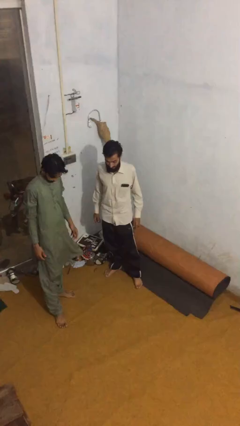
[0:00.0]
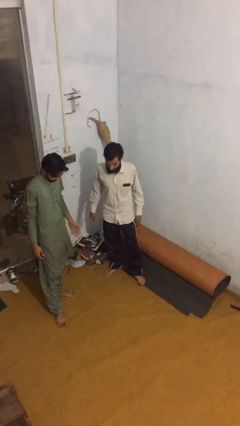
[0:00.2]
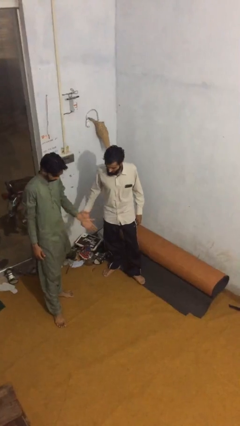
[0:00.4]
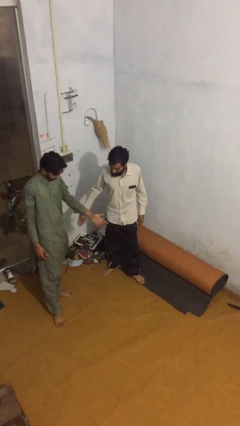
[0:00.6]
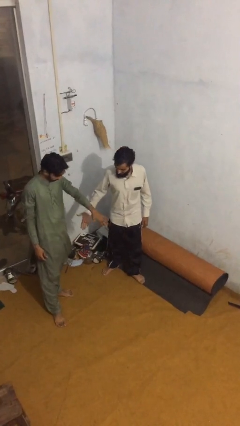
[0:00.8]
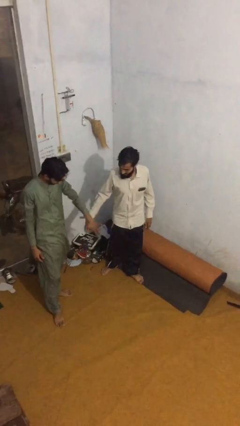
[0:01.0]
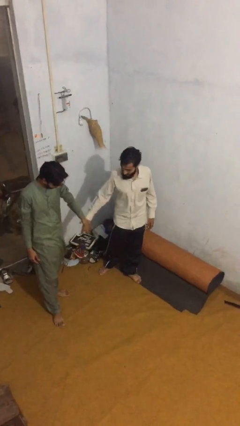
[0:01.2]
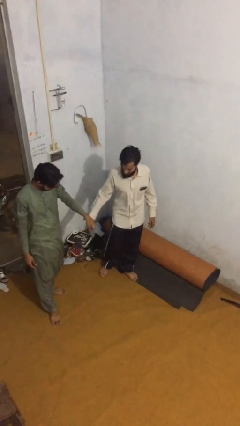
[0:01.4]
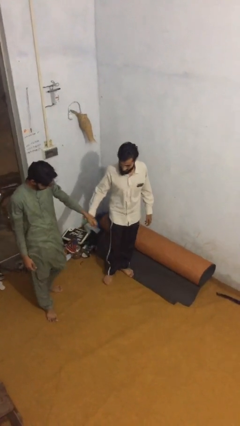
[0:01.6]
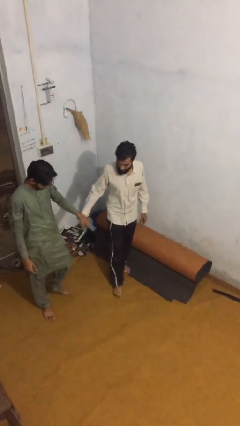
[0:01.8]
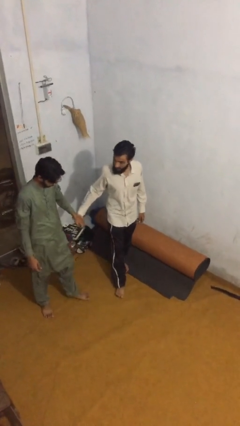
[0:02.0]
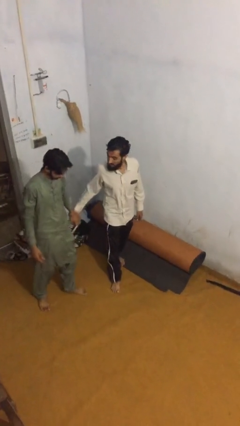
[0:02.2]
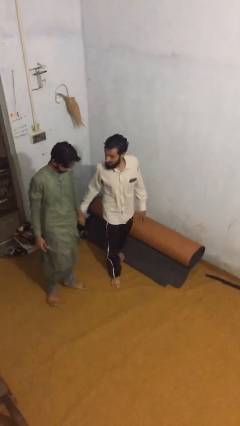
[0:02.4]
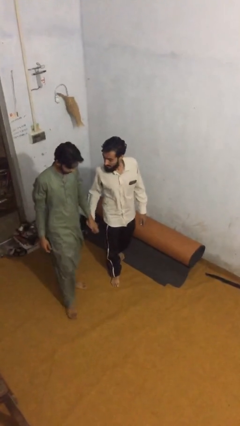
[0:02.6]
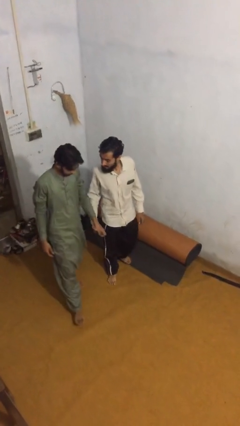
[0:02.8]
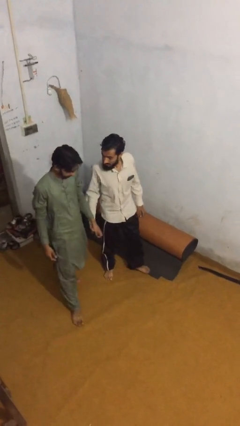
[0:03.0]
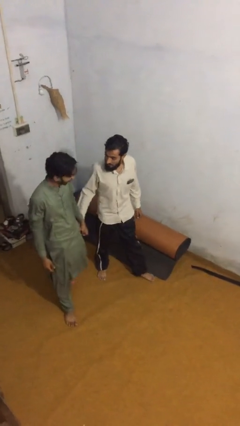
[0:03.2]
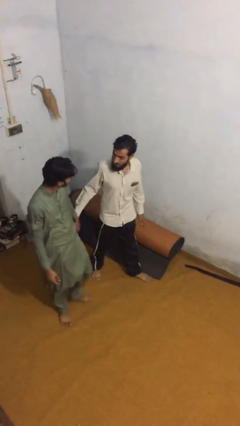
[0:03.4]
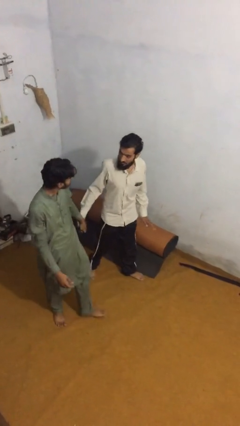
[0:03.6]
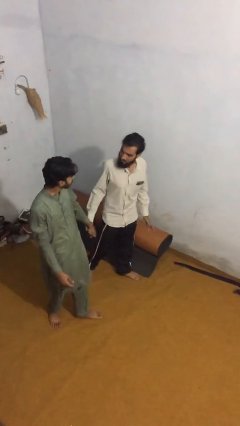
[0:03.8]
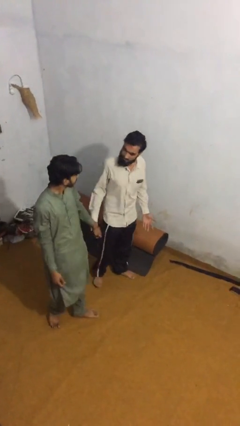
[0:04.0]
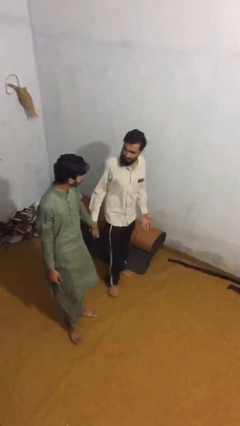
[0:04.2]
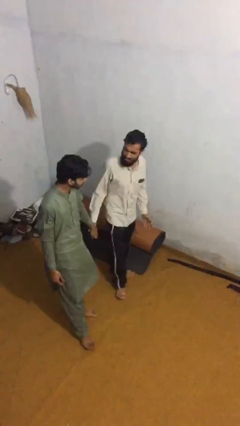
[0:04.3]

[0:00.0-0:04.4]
person holds hand

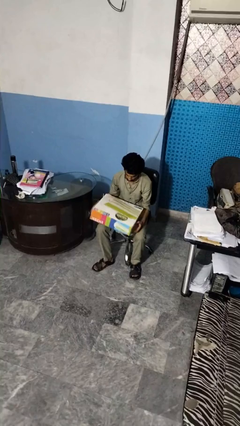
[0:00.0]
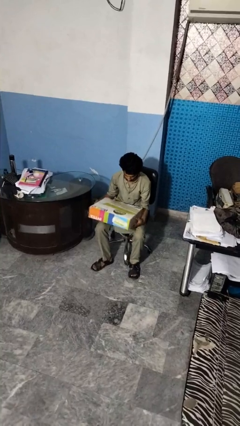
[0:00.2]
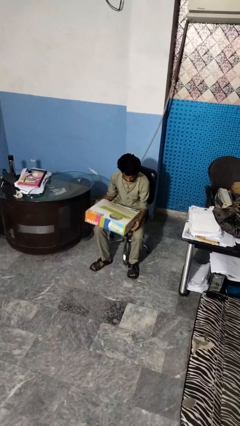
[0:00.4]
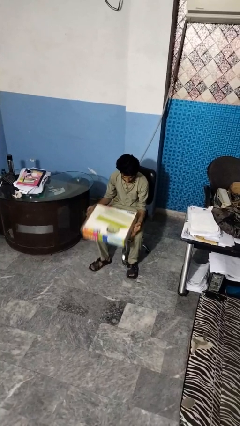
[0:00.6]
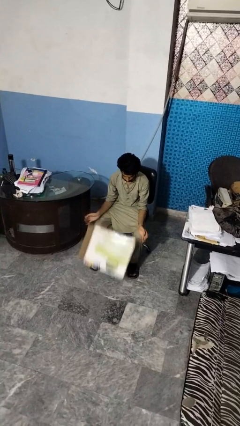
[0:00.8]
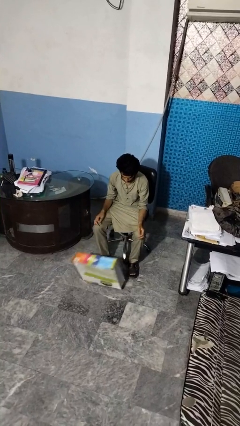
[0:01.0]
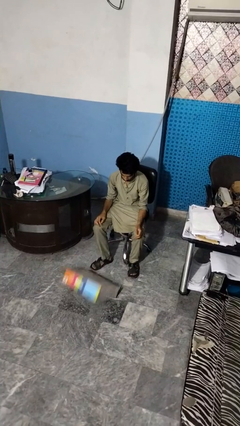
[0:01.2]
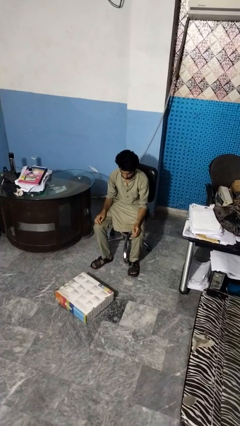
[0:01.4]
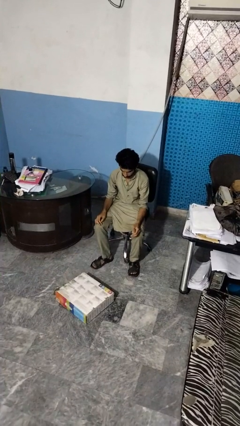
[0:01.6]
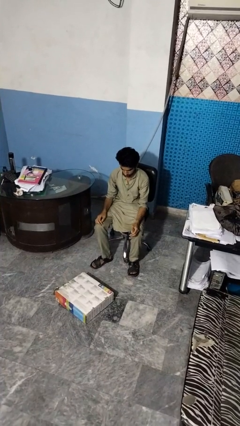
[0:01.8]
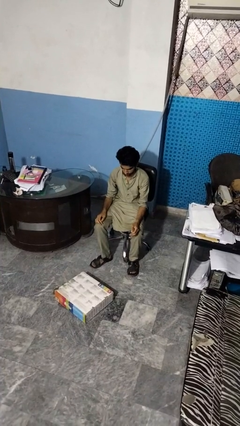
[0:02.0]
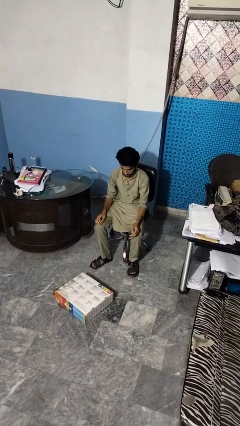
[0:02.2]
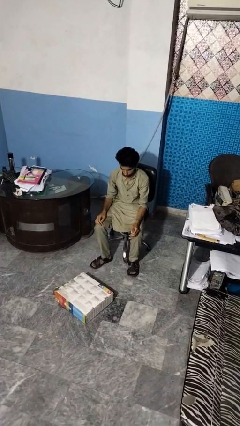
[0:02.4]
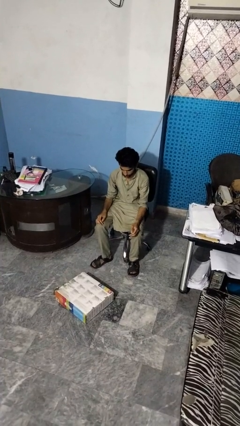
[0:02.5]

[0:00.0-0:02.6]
person drops object

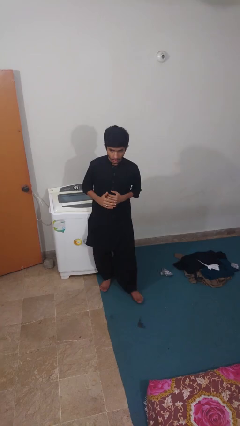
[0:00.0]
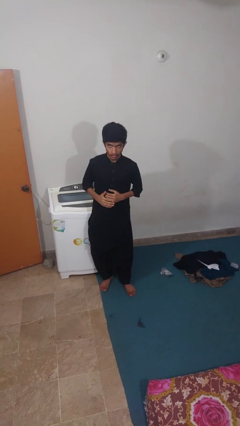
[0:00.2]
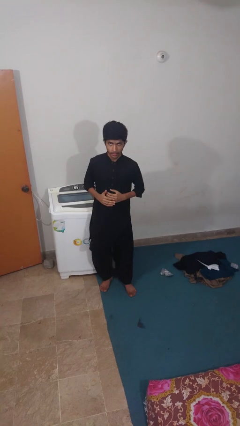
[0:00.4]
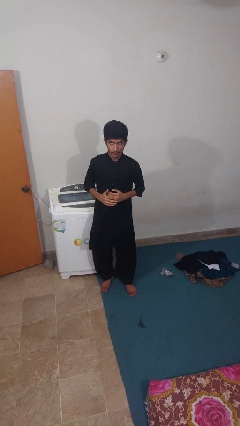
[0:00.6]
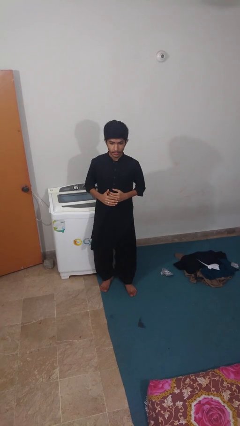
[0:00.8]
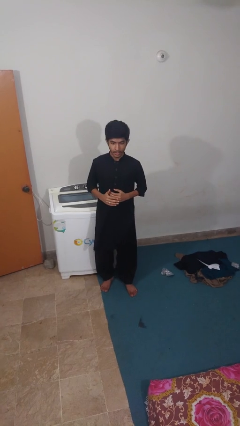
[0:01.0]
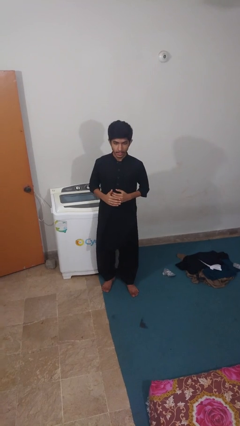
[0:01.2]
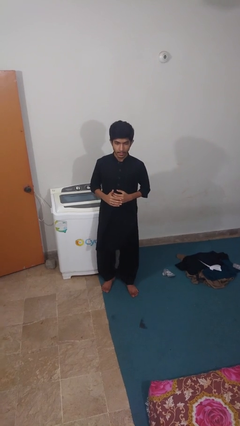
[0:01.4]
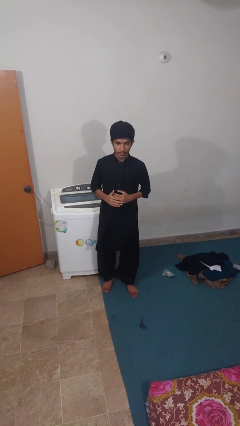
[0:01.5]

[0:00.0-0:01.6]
person karate chop

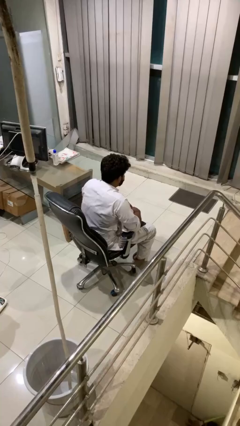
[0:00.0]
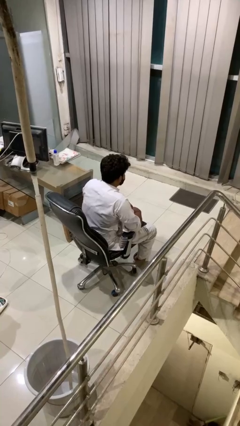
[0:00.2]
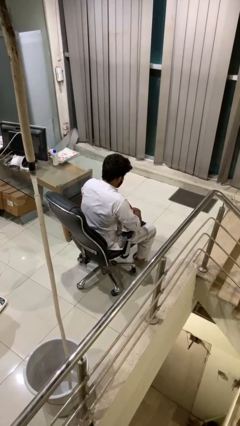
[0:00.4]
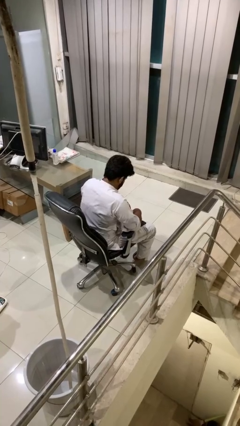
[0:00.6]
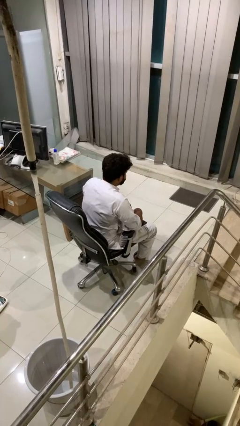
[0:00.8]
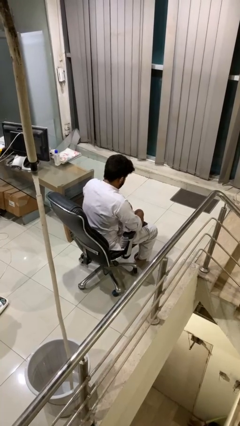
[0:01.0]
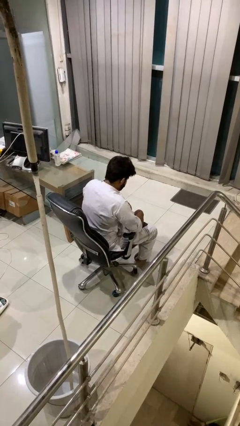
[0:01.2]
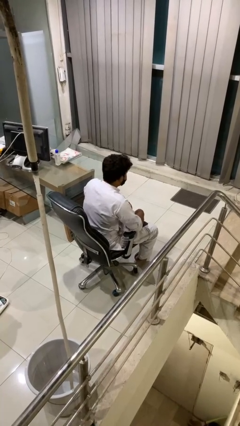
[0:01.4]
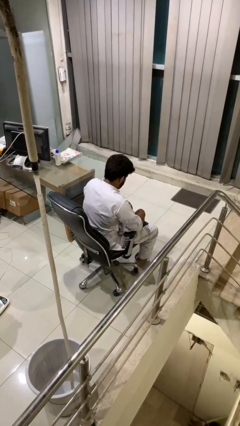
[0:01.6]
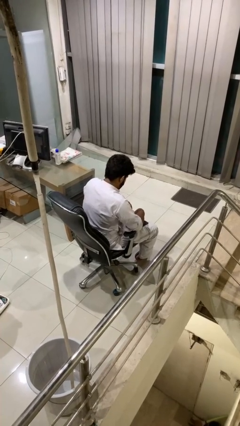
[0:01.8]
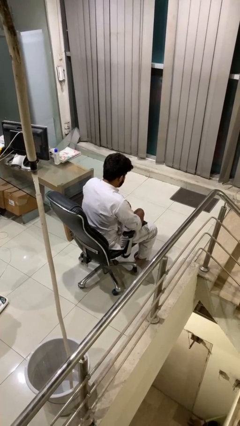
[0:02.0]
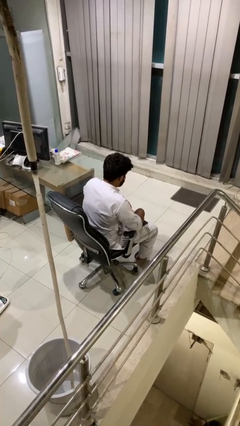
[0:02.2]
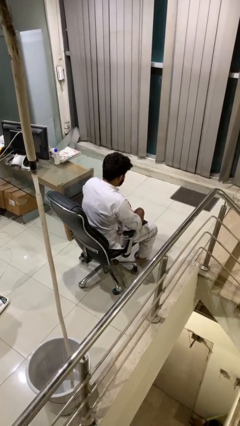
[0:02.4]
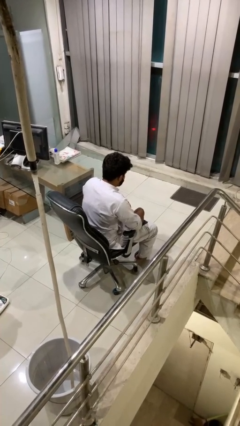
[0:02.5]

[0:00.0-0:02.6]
person nods head

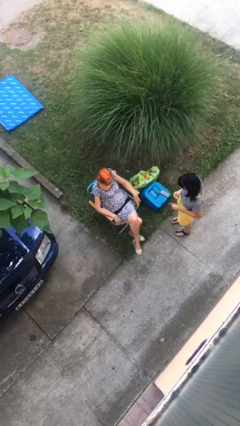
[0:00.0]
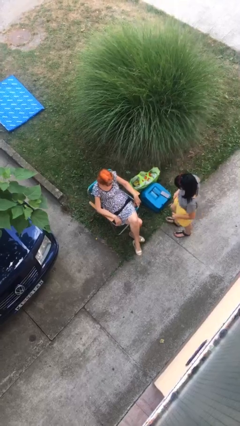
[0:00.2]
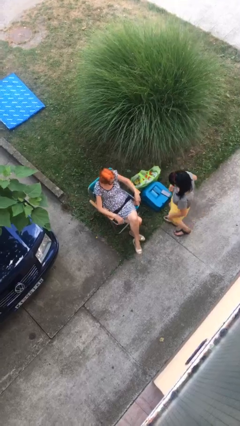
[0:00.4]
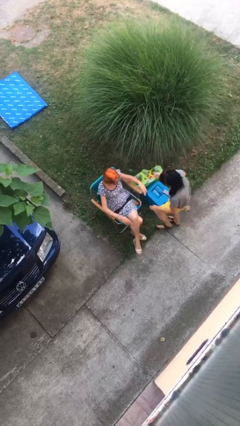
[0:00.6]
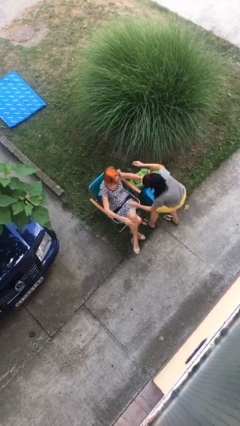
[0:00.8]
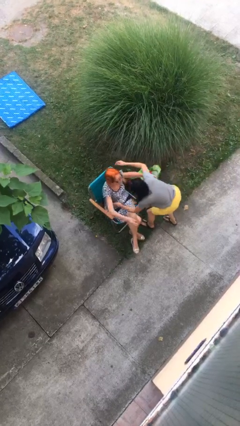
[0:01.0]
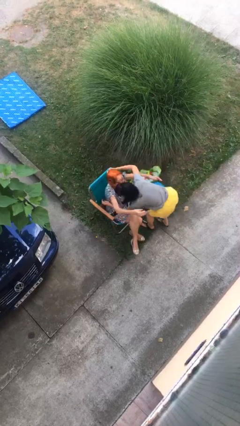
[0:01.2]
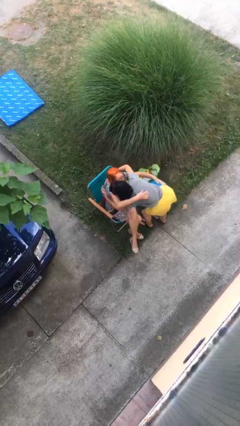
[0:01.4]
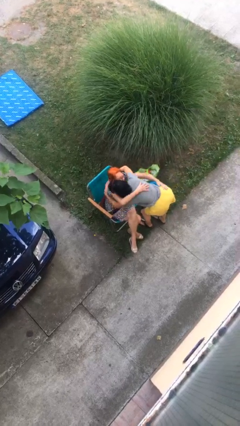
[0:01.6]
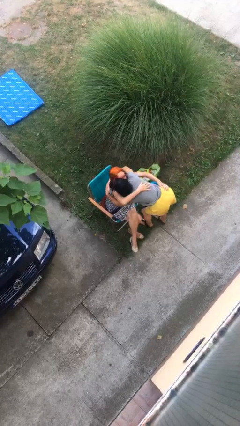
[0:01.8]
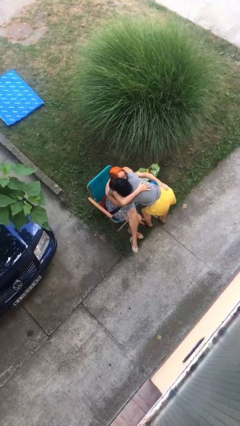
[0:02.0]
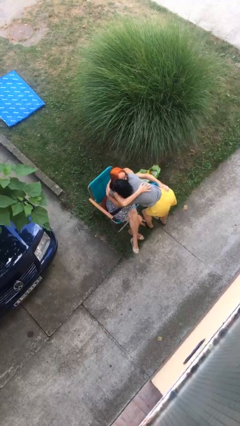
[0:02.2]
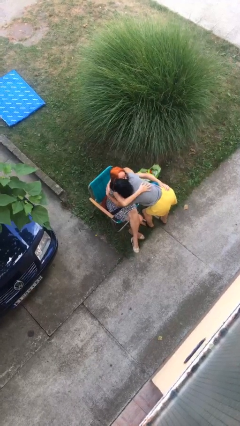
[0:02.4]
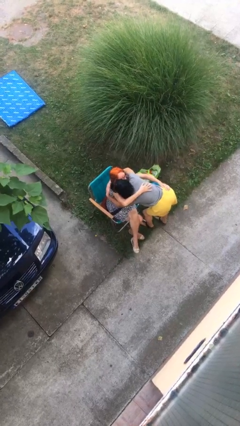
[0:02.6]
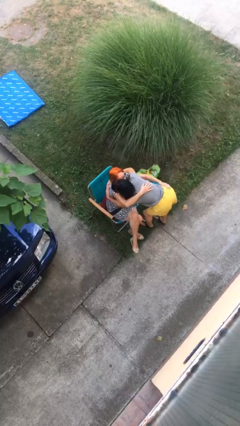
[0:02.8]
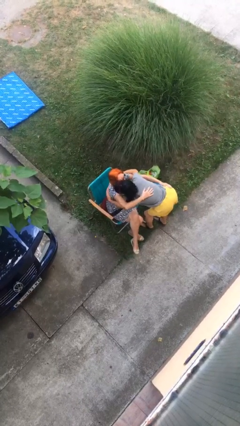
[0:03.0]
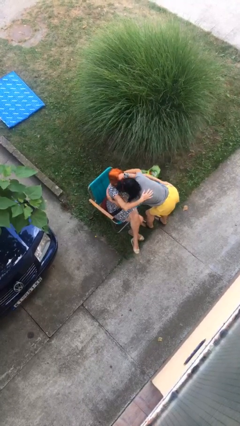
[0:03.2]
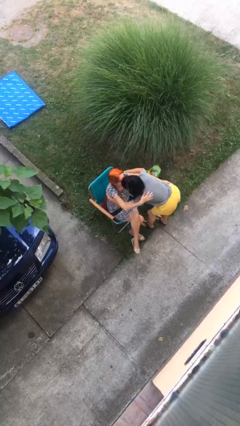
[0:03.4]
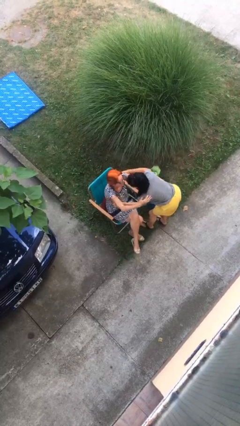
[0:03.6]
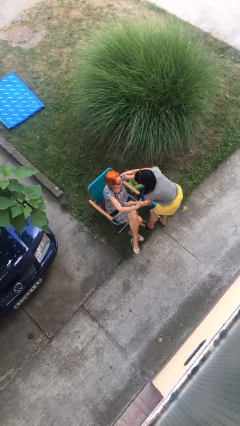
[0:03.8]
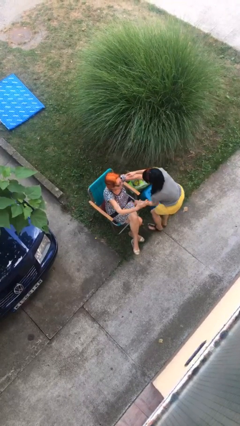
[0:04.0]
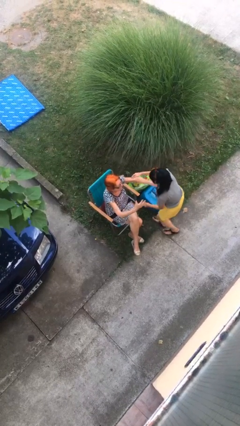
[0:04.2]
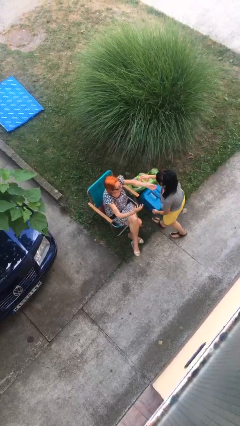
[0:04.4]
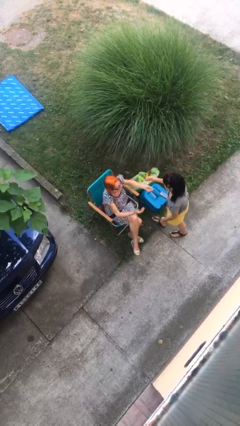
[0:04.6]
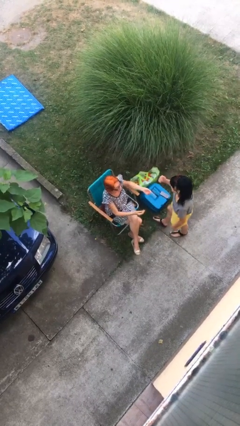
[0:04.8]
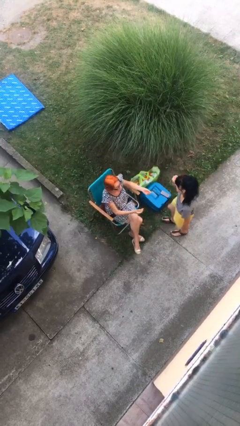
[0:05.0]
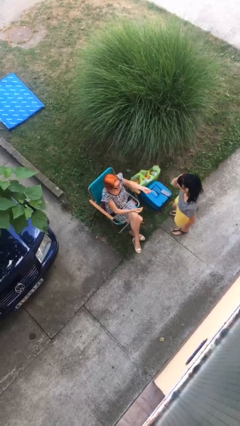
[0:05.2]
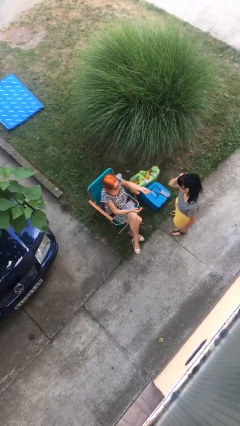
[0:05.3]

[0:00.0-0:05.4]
person embraces person

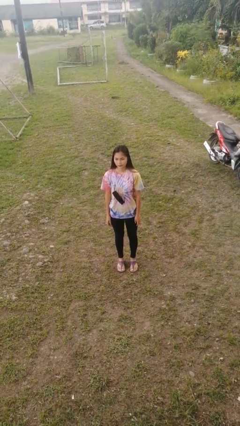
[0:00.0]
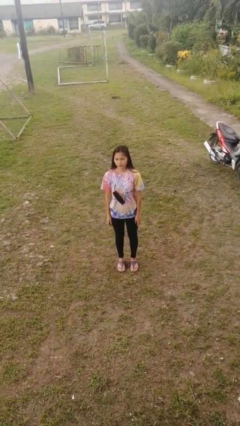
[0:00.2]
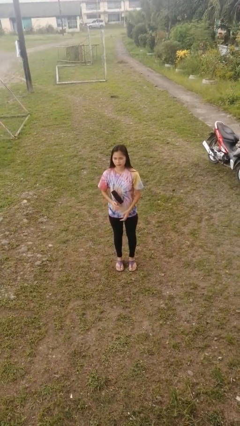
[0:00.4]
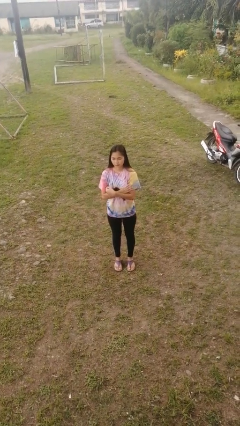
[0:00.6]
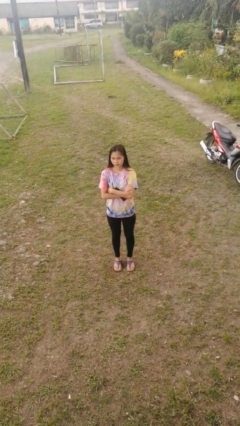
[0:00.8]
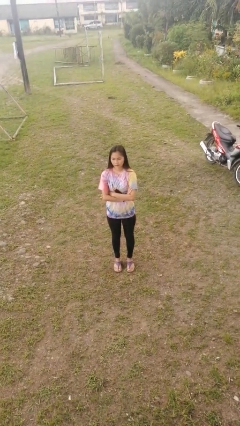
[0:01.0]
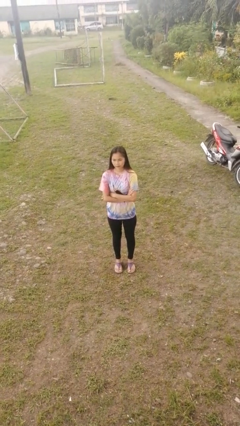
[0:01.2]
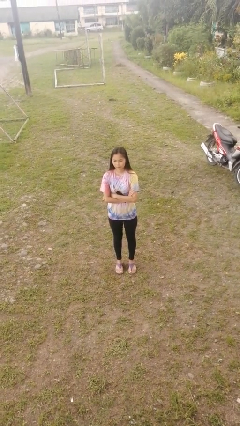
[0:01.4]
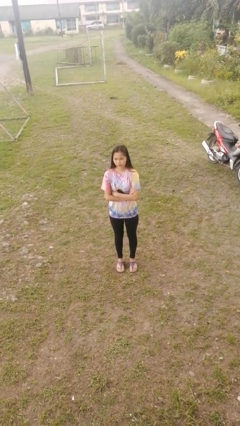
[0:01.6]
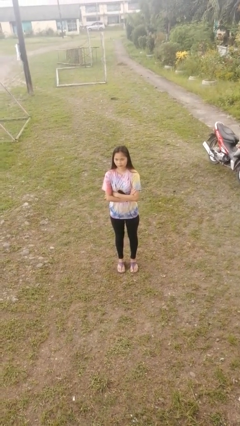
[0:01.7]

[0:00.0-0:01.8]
person crosses arms
